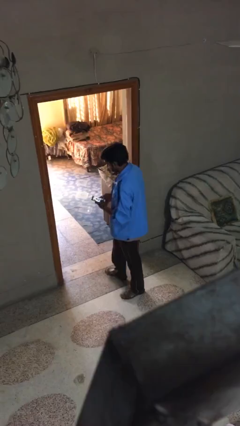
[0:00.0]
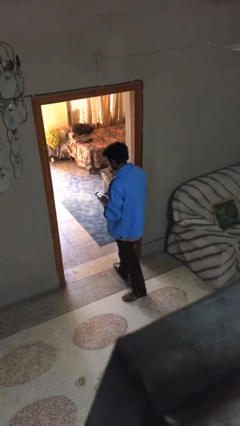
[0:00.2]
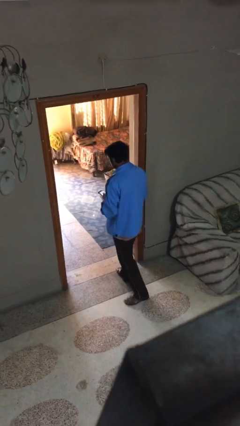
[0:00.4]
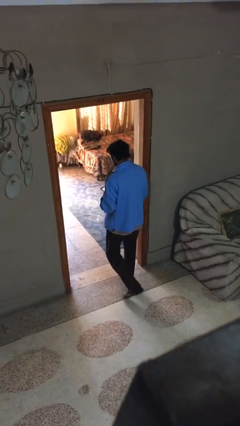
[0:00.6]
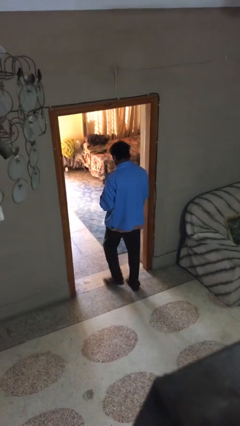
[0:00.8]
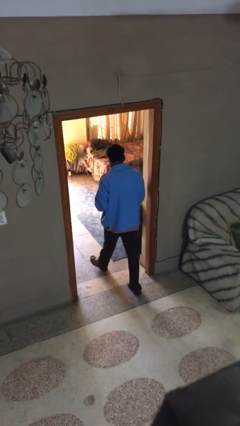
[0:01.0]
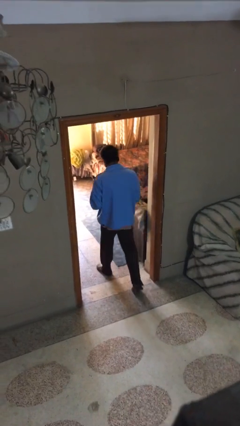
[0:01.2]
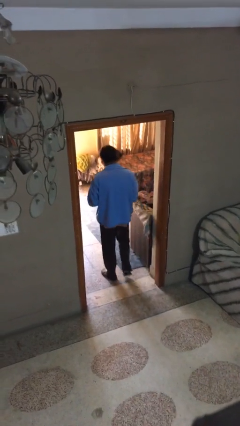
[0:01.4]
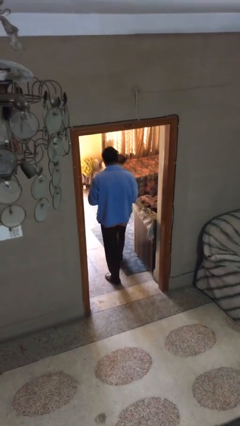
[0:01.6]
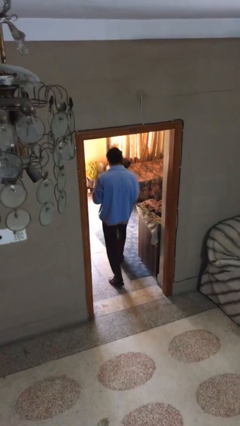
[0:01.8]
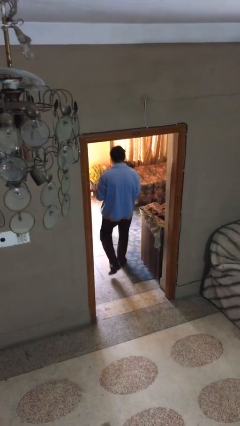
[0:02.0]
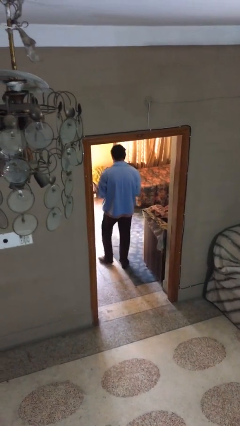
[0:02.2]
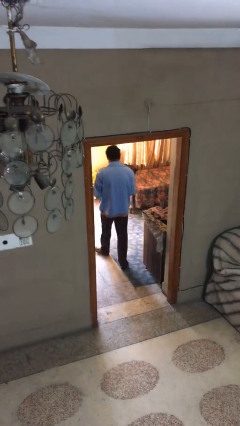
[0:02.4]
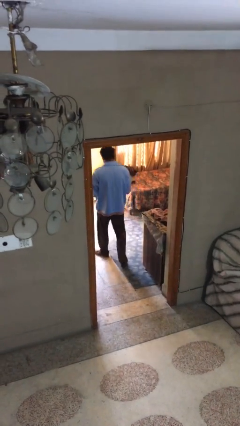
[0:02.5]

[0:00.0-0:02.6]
person exits scene through structure

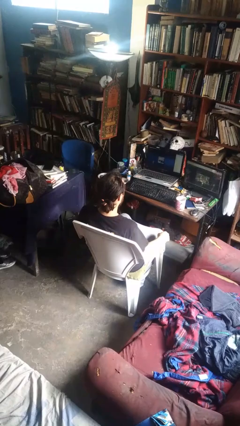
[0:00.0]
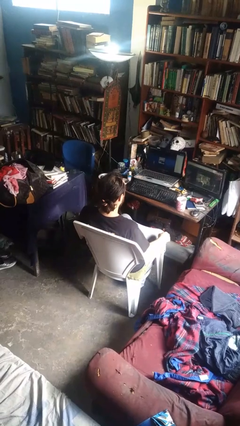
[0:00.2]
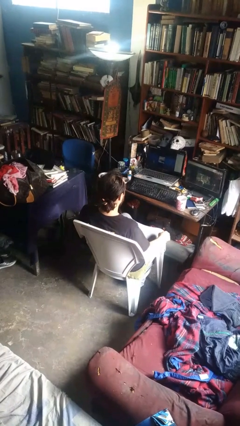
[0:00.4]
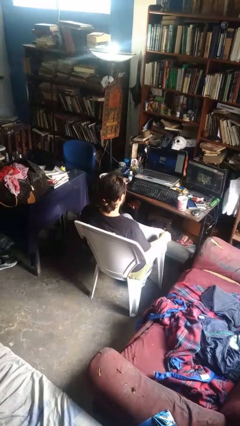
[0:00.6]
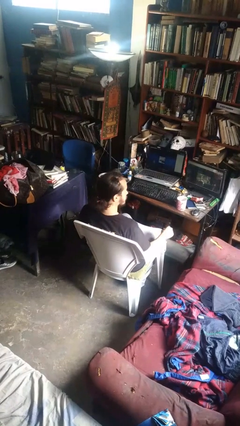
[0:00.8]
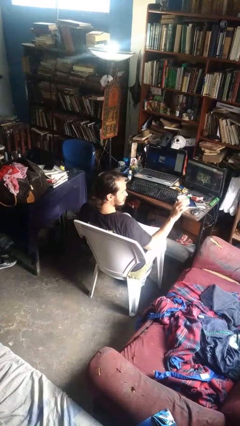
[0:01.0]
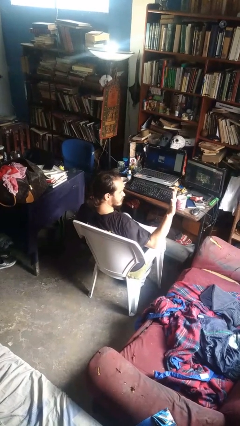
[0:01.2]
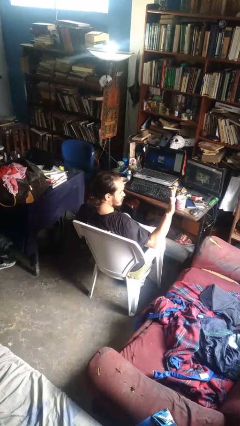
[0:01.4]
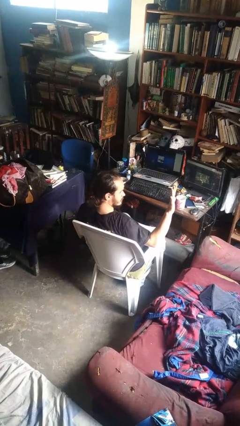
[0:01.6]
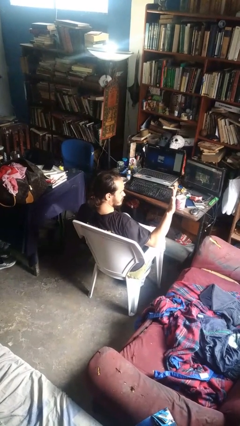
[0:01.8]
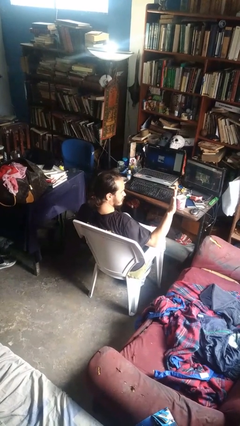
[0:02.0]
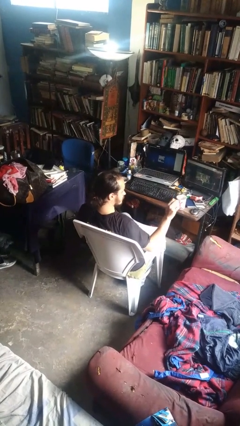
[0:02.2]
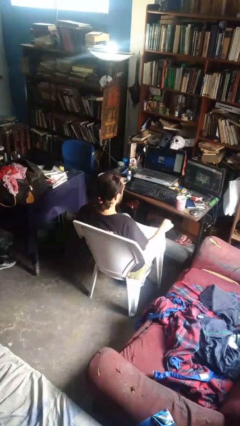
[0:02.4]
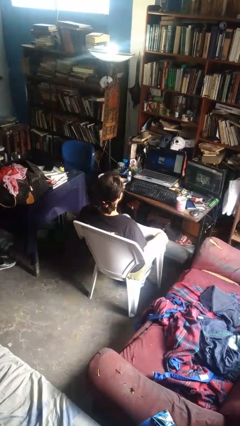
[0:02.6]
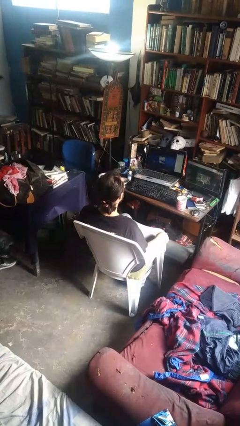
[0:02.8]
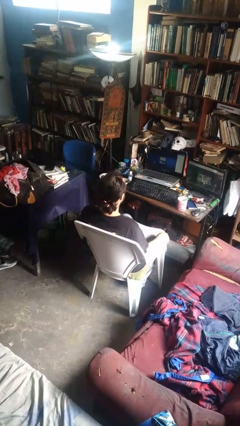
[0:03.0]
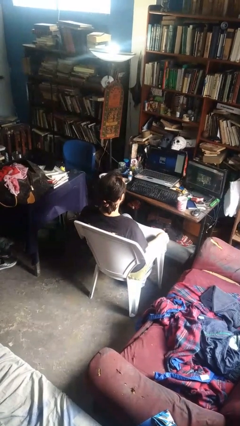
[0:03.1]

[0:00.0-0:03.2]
person gestures number five

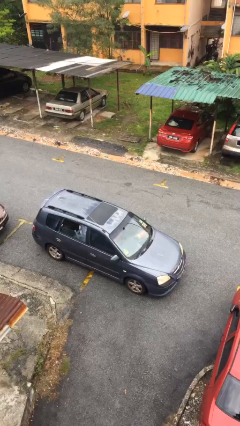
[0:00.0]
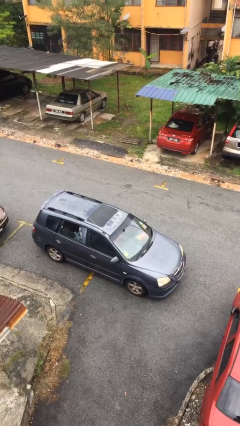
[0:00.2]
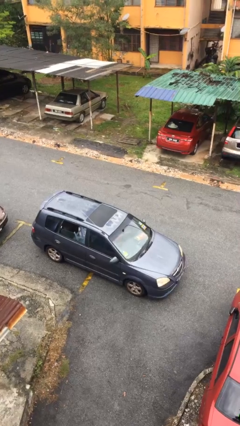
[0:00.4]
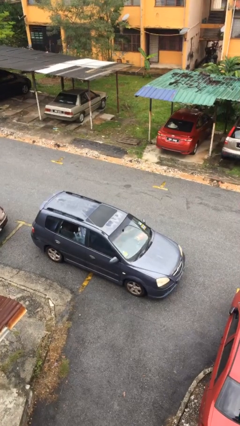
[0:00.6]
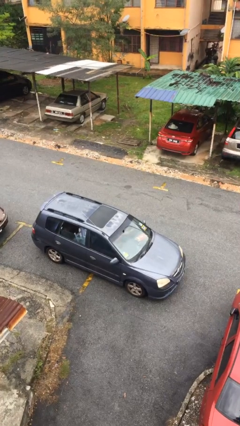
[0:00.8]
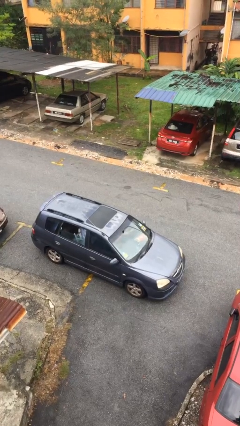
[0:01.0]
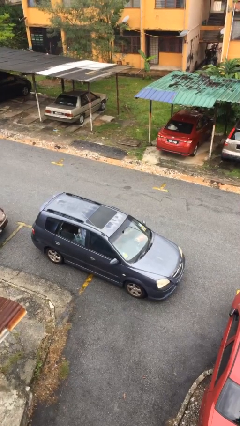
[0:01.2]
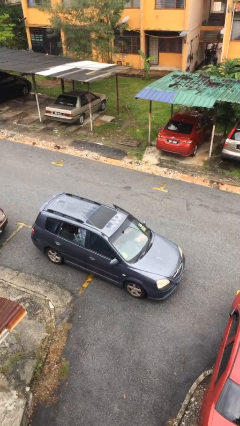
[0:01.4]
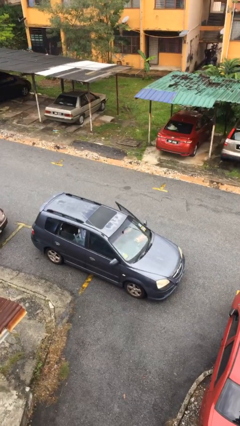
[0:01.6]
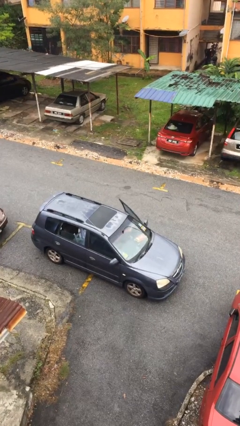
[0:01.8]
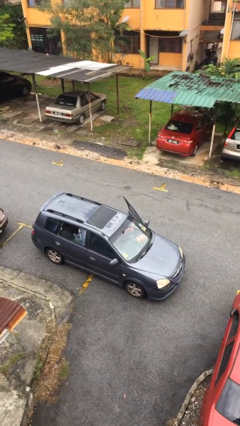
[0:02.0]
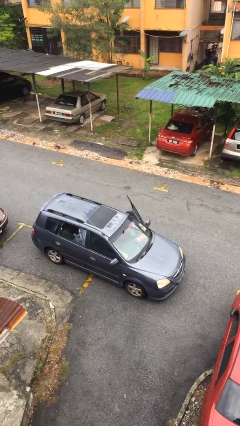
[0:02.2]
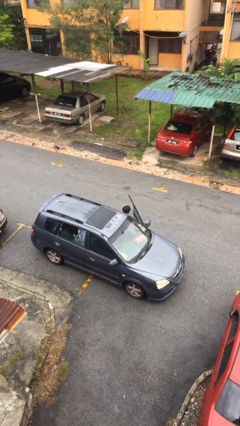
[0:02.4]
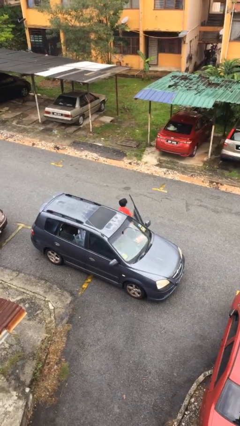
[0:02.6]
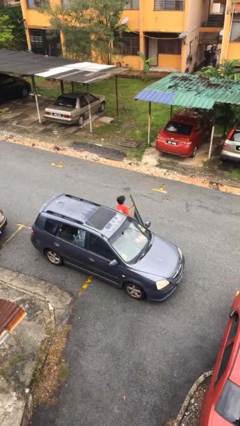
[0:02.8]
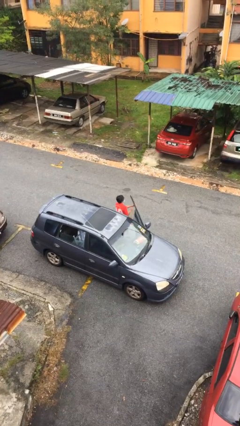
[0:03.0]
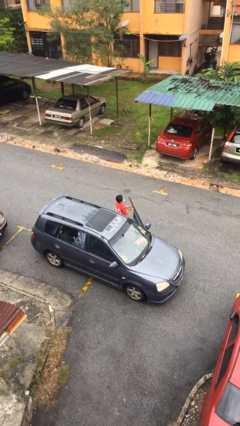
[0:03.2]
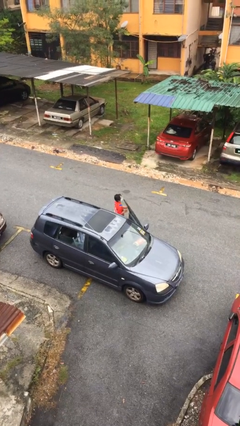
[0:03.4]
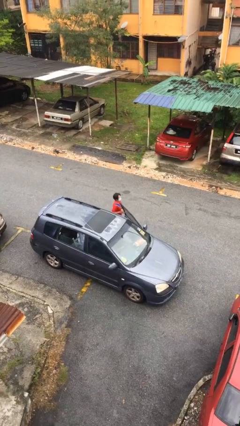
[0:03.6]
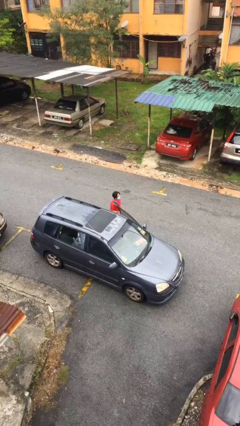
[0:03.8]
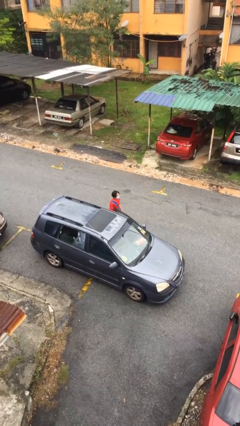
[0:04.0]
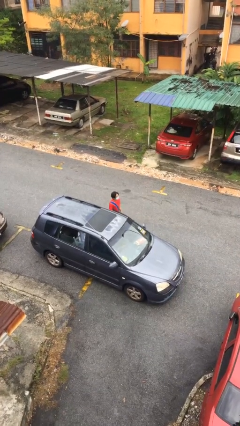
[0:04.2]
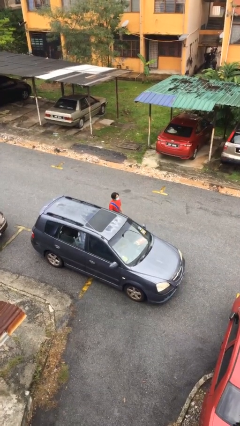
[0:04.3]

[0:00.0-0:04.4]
person exits car

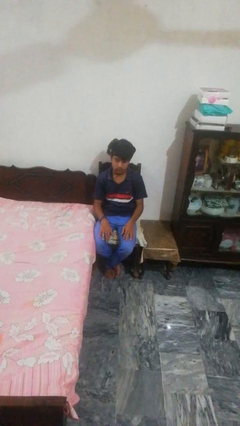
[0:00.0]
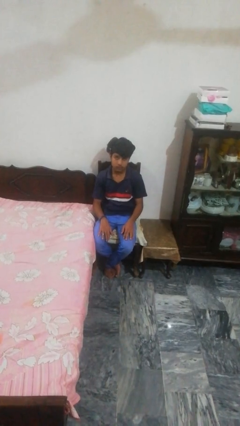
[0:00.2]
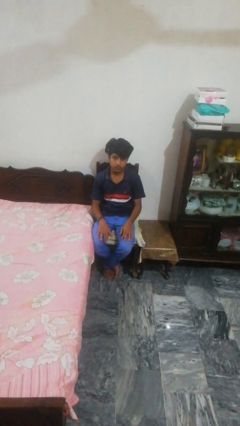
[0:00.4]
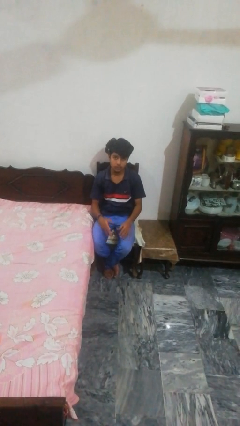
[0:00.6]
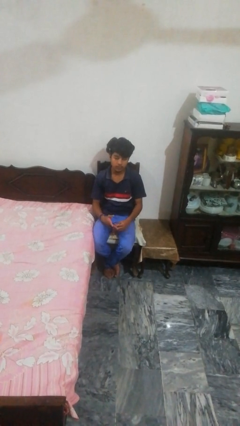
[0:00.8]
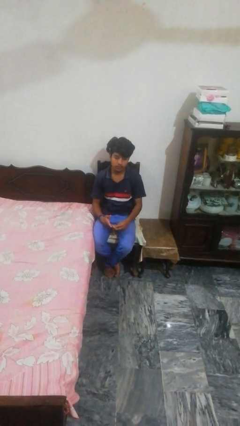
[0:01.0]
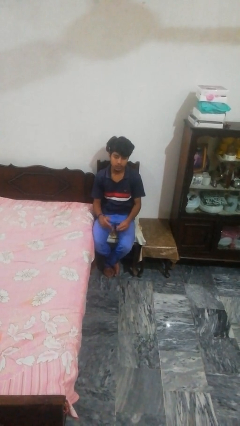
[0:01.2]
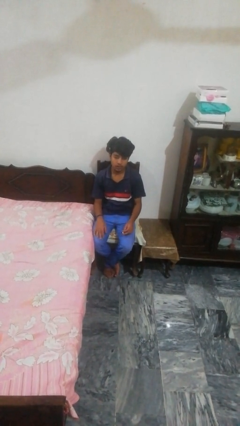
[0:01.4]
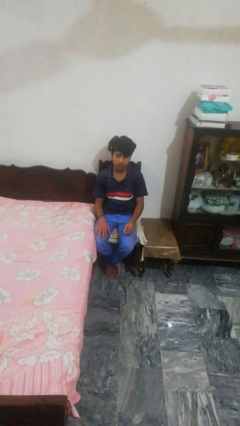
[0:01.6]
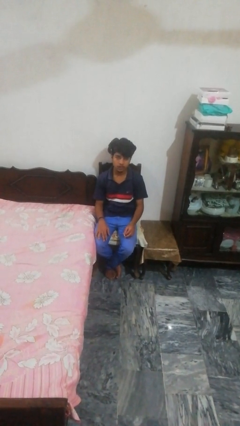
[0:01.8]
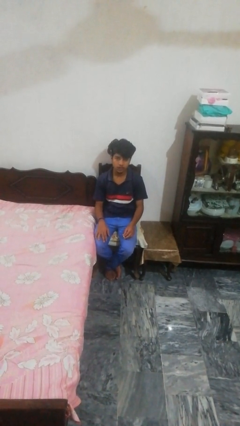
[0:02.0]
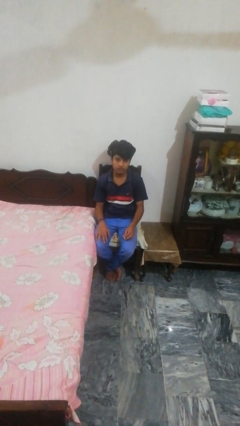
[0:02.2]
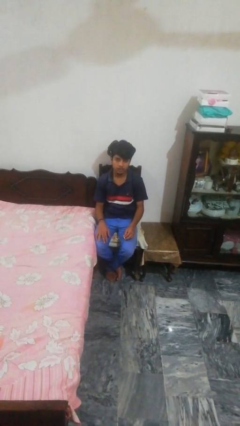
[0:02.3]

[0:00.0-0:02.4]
person takes off ring

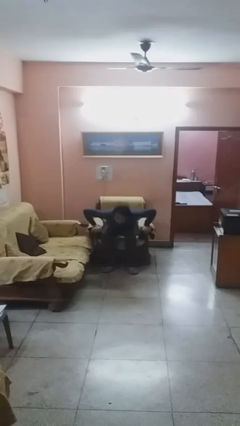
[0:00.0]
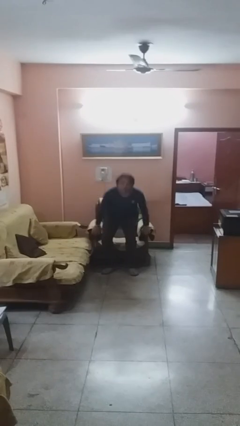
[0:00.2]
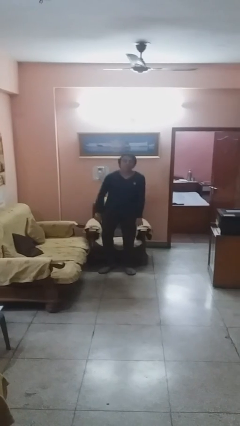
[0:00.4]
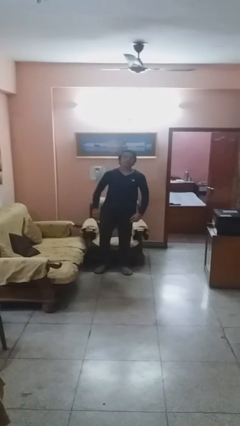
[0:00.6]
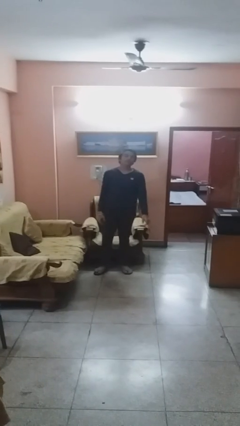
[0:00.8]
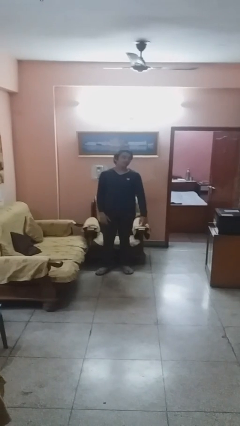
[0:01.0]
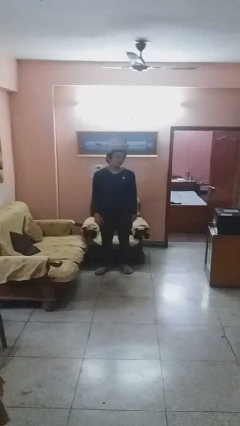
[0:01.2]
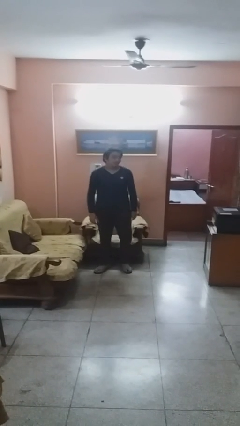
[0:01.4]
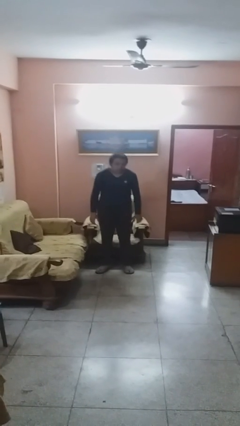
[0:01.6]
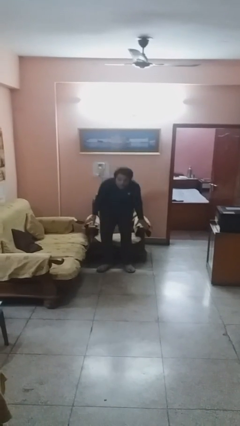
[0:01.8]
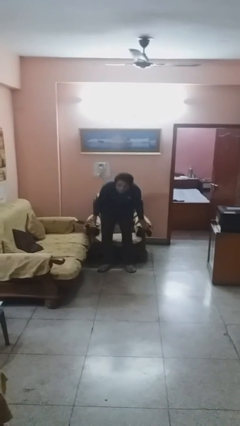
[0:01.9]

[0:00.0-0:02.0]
person stands up

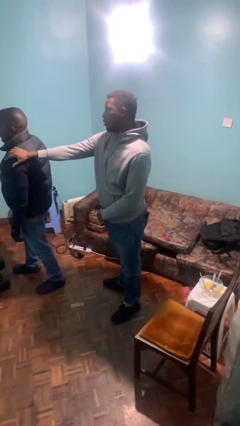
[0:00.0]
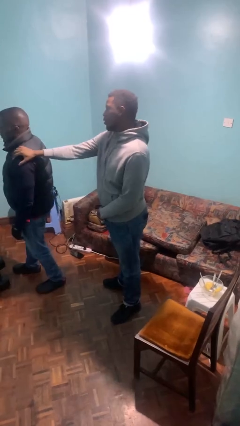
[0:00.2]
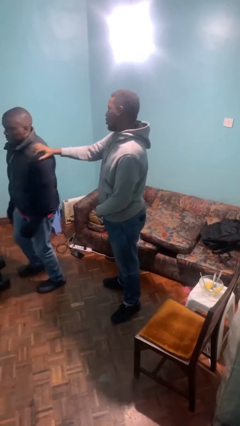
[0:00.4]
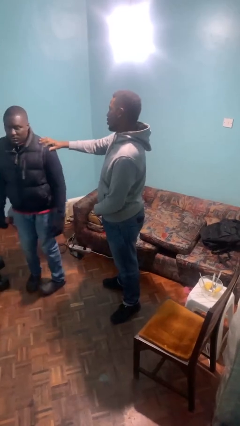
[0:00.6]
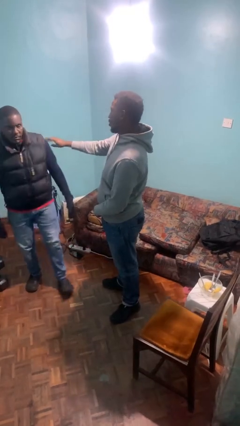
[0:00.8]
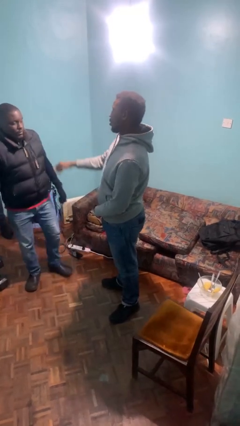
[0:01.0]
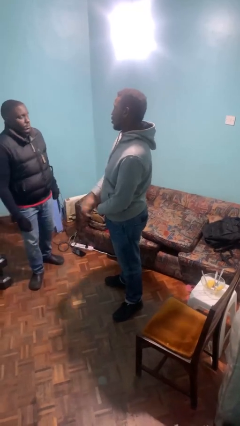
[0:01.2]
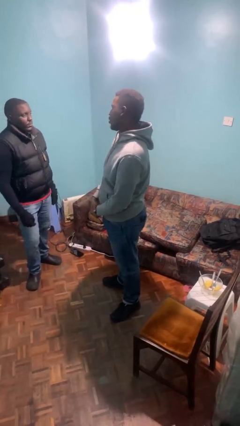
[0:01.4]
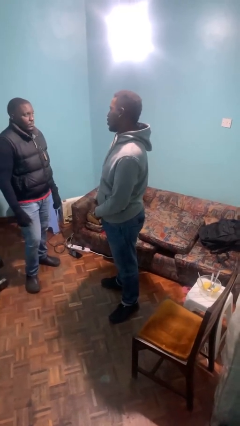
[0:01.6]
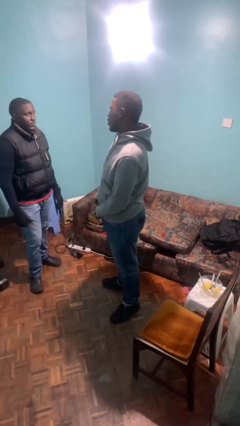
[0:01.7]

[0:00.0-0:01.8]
person spins person around

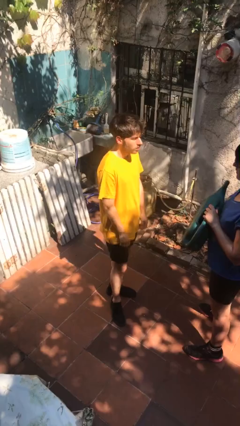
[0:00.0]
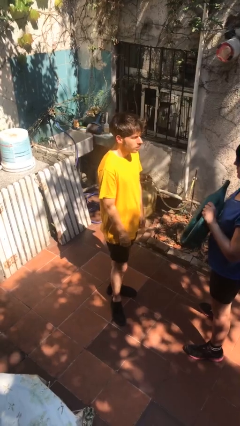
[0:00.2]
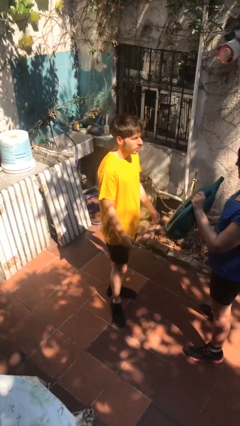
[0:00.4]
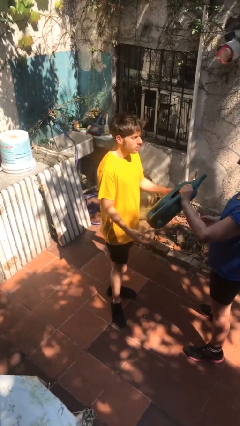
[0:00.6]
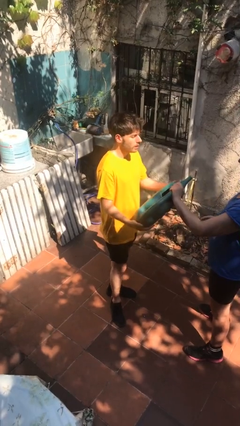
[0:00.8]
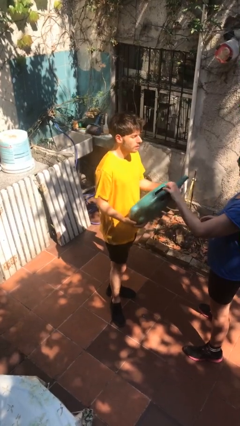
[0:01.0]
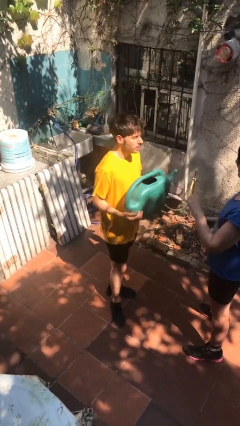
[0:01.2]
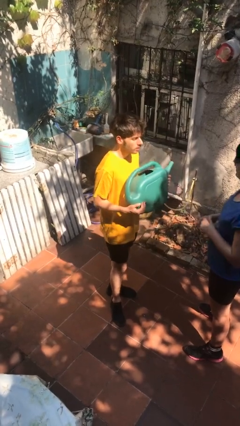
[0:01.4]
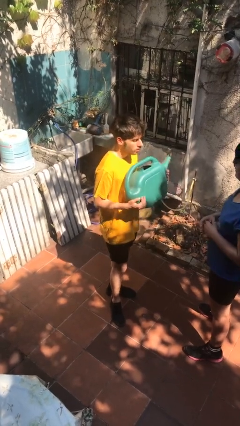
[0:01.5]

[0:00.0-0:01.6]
person transfers object to person
